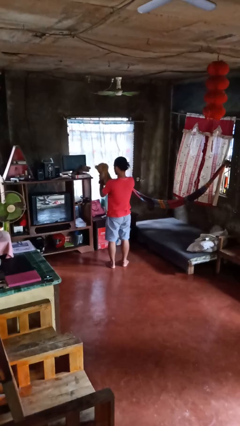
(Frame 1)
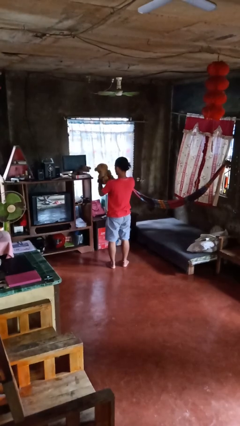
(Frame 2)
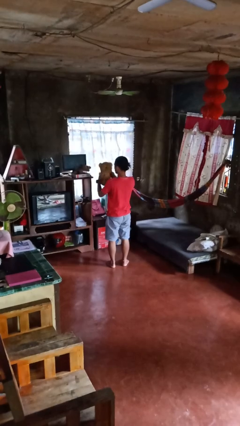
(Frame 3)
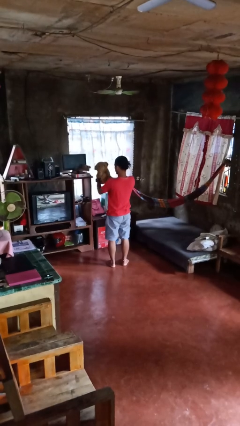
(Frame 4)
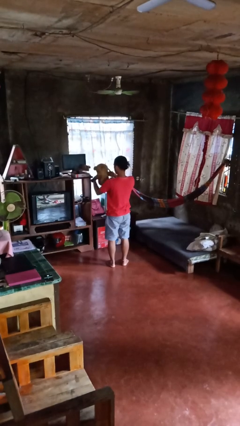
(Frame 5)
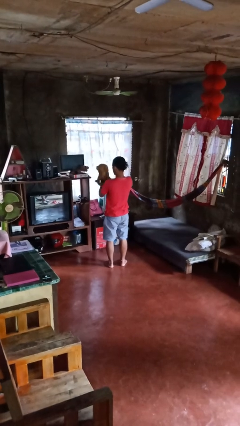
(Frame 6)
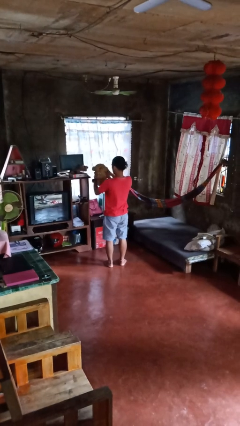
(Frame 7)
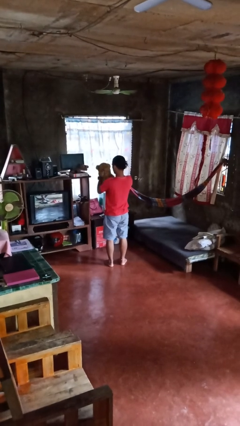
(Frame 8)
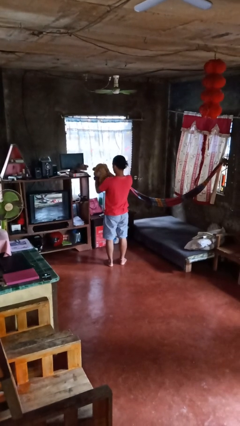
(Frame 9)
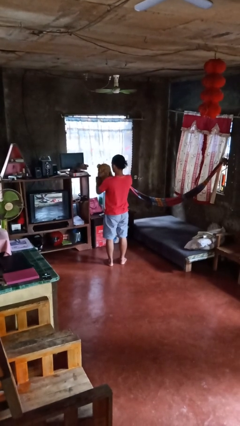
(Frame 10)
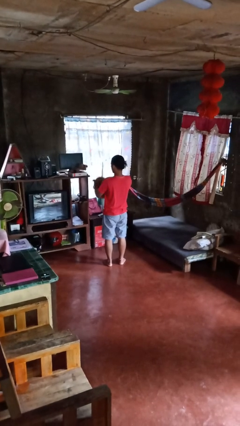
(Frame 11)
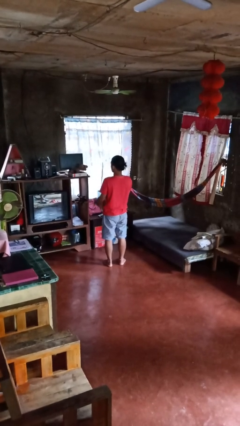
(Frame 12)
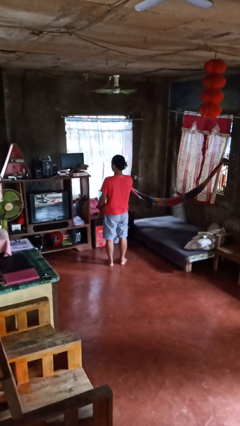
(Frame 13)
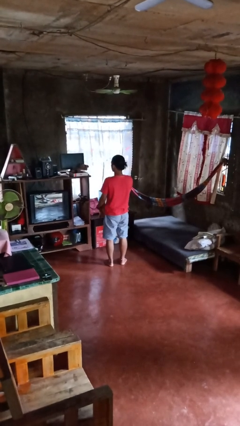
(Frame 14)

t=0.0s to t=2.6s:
person squeezes object

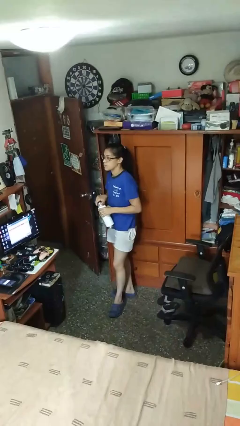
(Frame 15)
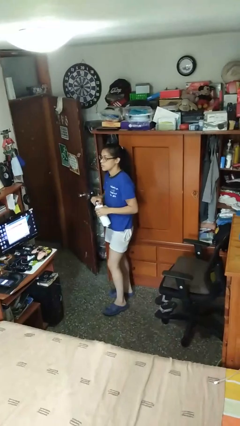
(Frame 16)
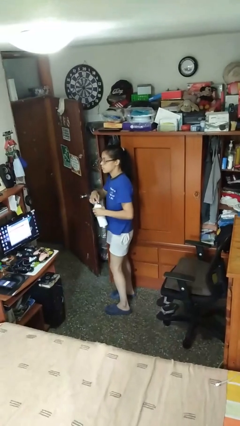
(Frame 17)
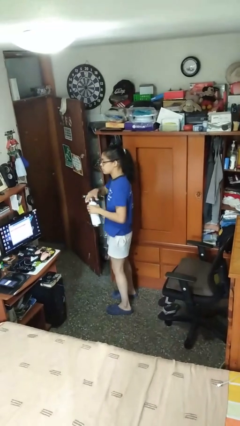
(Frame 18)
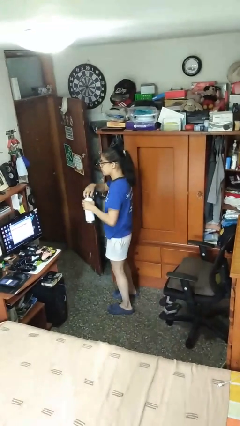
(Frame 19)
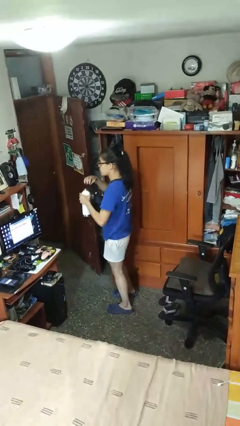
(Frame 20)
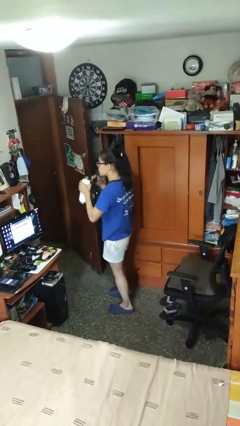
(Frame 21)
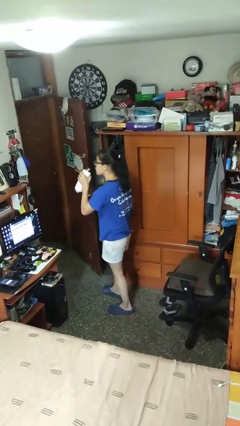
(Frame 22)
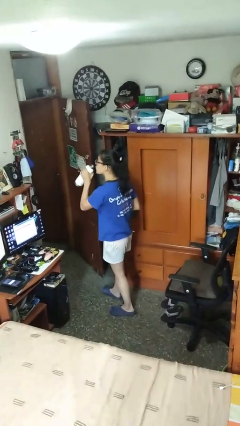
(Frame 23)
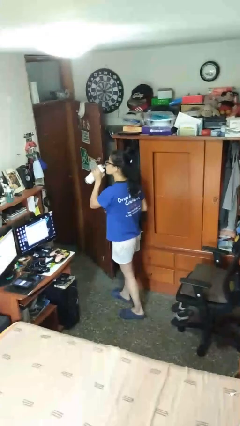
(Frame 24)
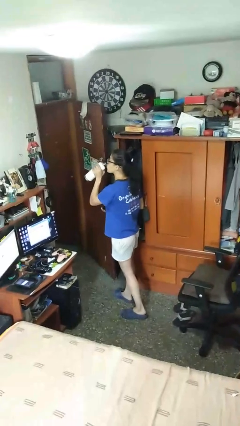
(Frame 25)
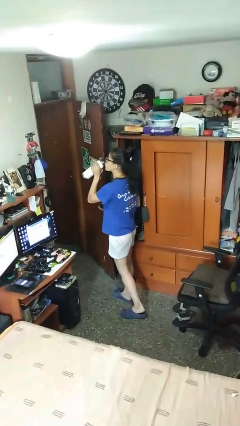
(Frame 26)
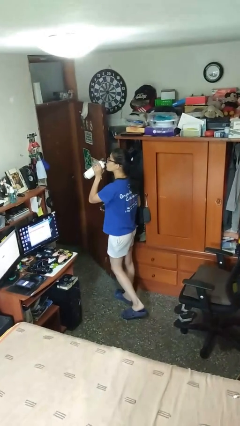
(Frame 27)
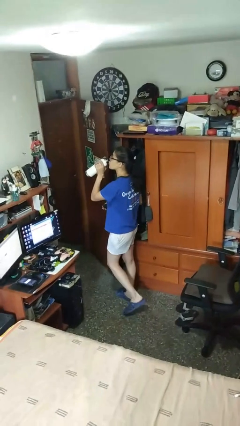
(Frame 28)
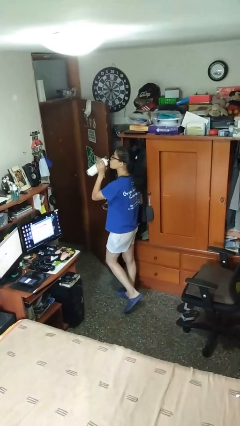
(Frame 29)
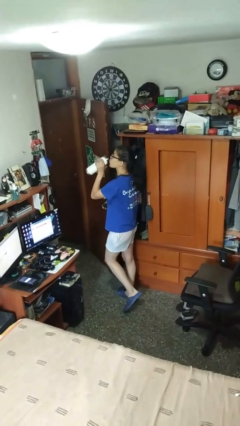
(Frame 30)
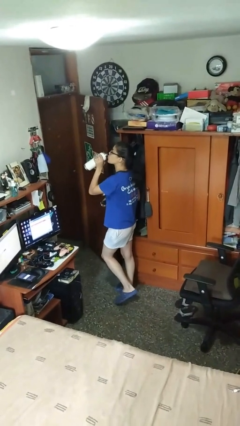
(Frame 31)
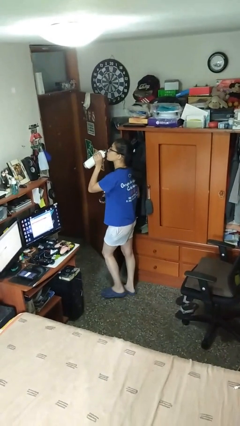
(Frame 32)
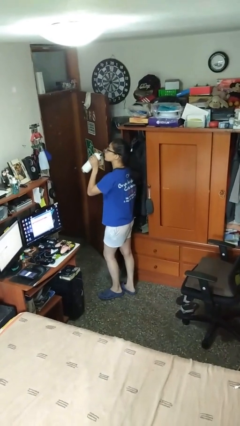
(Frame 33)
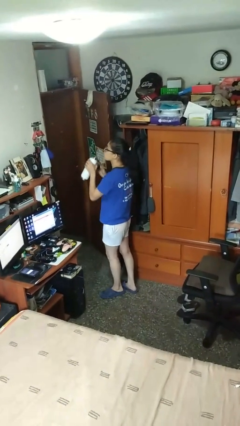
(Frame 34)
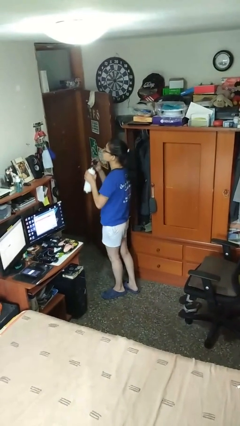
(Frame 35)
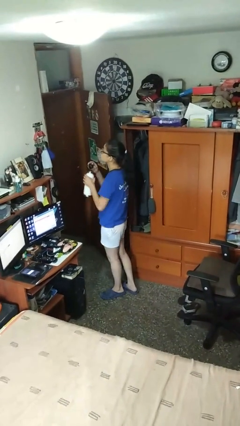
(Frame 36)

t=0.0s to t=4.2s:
person drinks from bottle

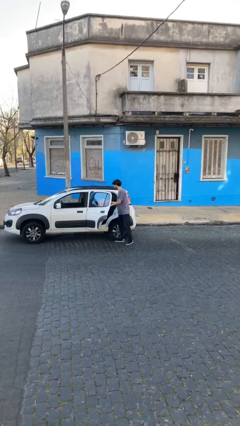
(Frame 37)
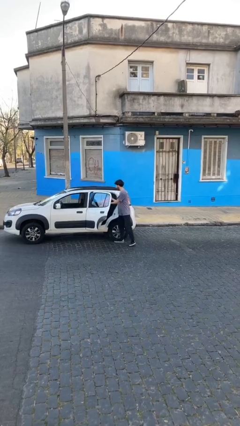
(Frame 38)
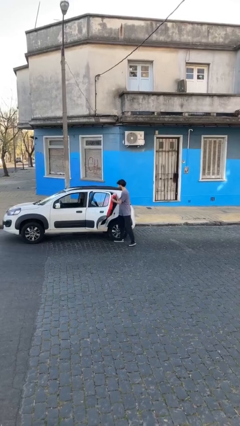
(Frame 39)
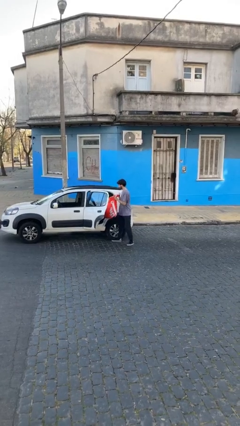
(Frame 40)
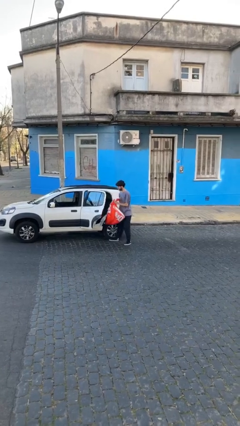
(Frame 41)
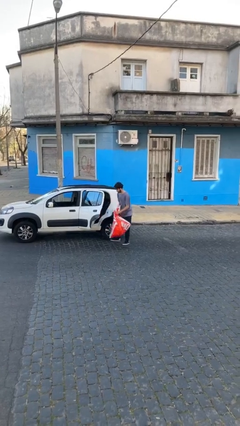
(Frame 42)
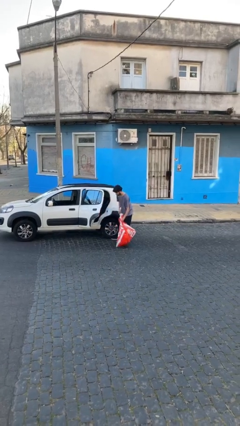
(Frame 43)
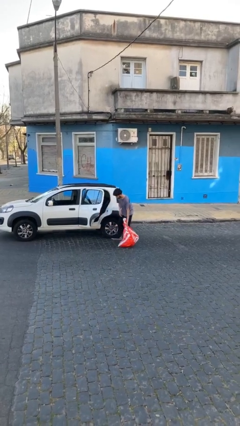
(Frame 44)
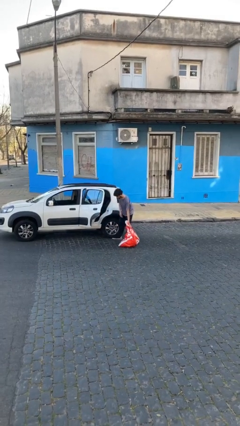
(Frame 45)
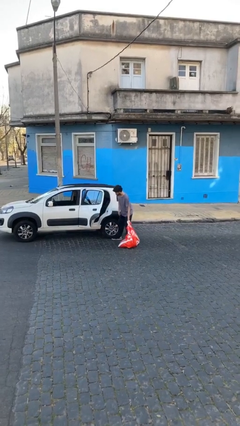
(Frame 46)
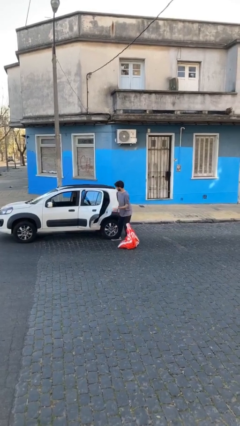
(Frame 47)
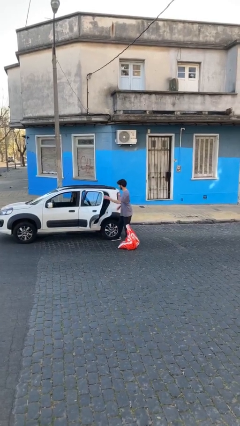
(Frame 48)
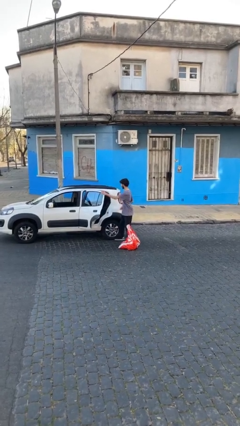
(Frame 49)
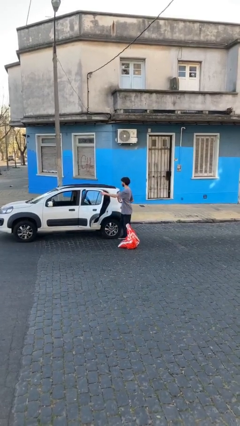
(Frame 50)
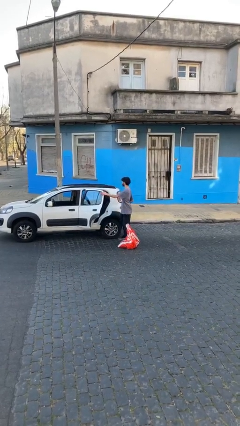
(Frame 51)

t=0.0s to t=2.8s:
person unloads car

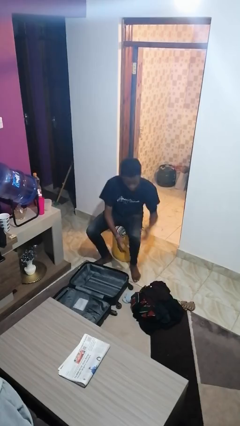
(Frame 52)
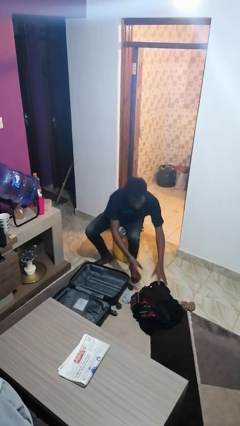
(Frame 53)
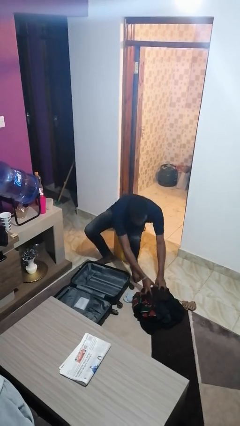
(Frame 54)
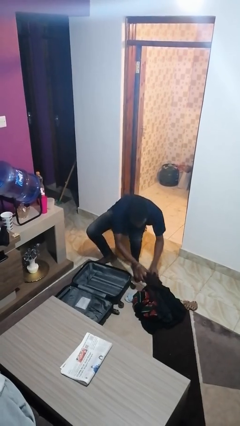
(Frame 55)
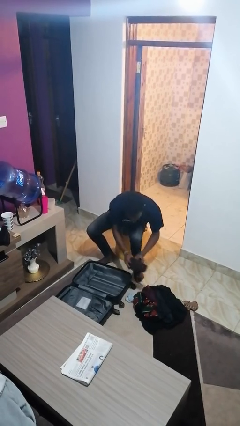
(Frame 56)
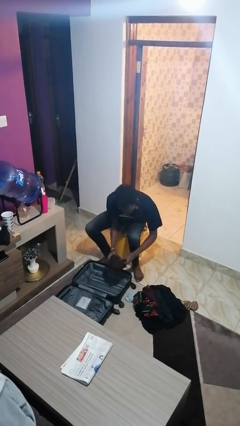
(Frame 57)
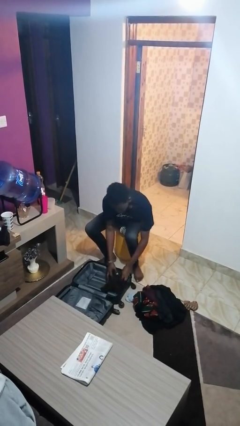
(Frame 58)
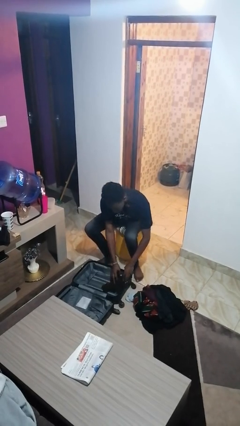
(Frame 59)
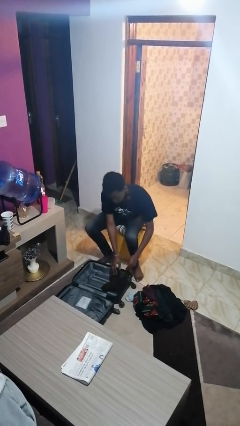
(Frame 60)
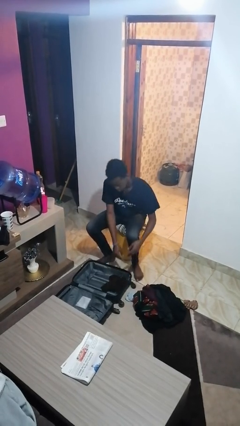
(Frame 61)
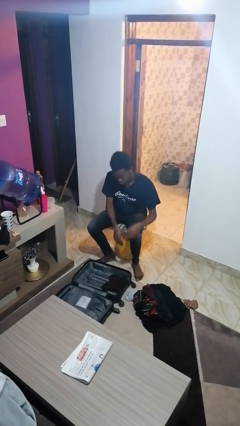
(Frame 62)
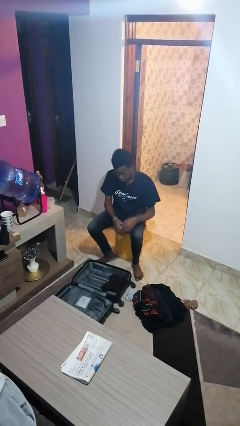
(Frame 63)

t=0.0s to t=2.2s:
person loads clothes into suitcase

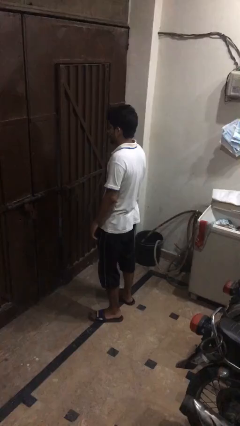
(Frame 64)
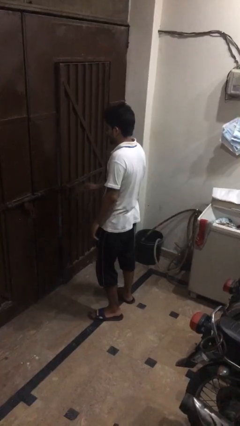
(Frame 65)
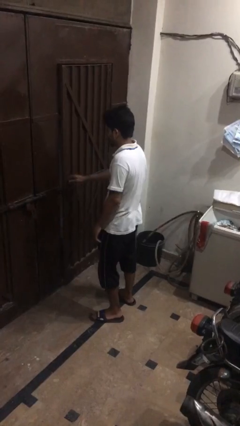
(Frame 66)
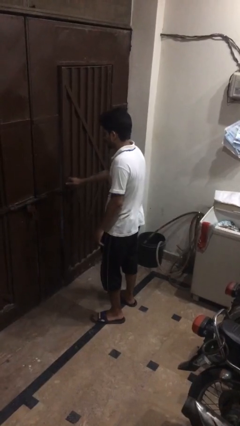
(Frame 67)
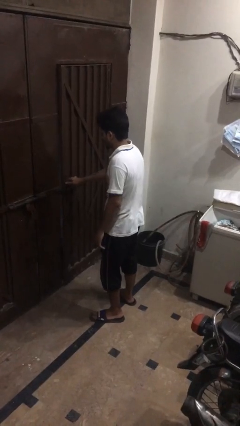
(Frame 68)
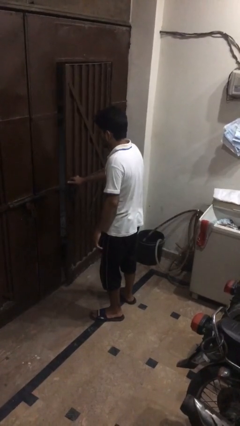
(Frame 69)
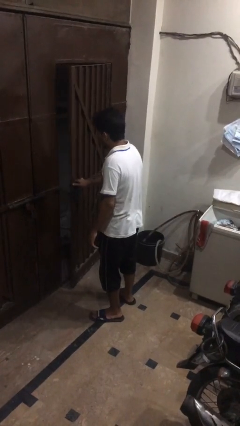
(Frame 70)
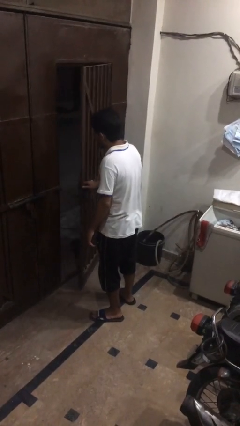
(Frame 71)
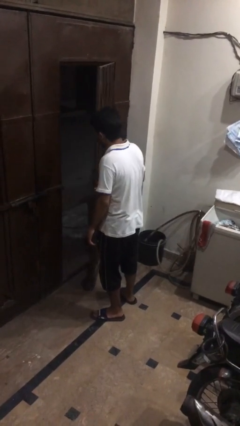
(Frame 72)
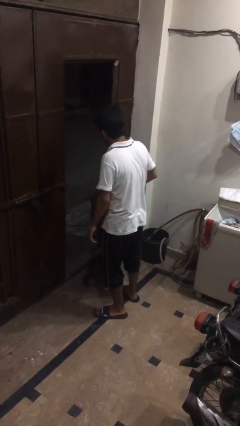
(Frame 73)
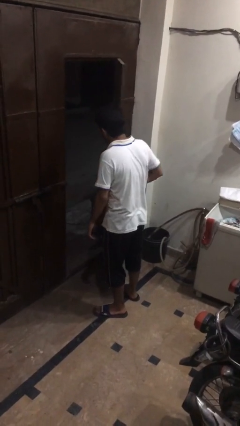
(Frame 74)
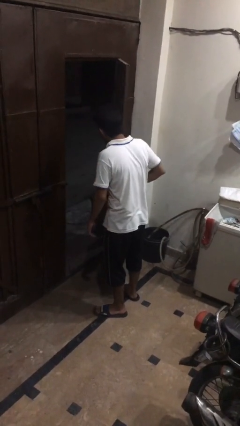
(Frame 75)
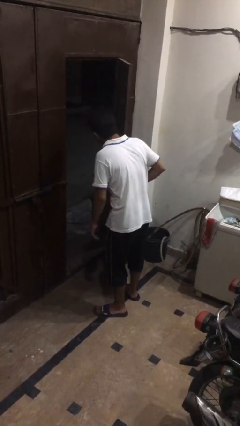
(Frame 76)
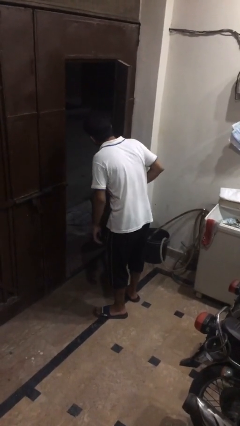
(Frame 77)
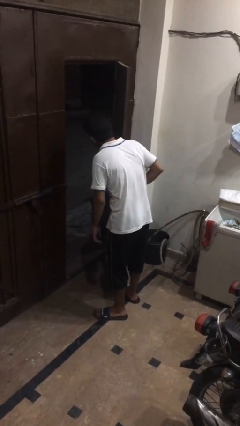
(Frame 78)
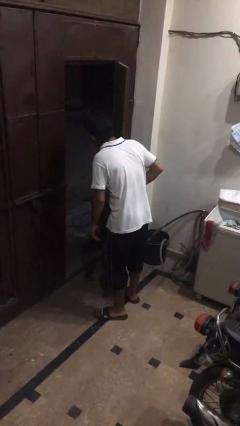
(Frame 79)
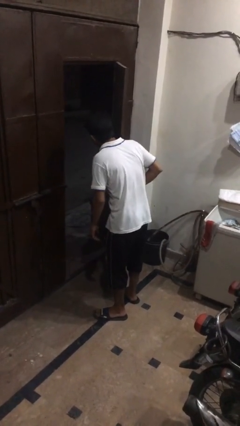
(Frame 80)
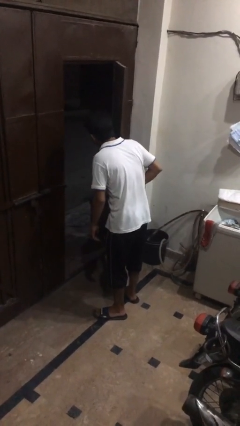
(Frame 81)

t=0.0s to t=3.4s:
person opens gate

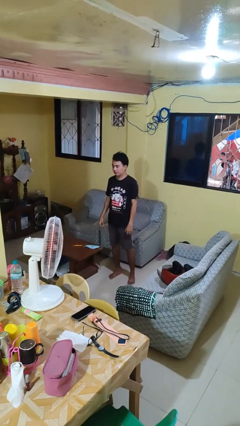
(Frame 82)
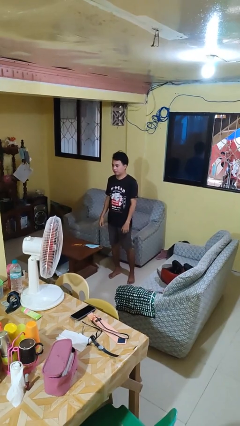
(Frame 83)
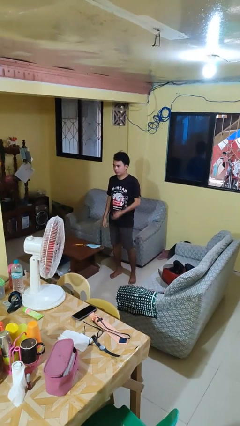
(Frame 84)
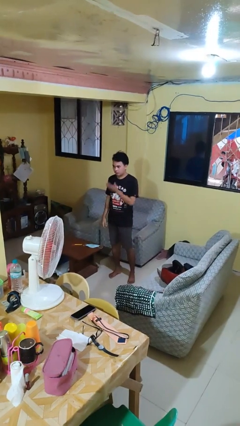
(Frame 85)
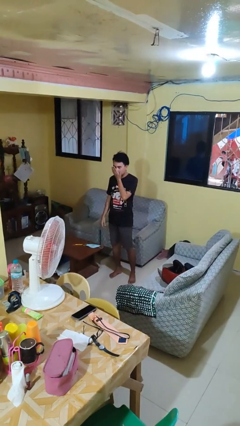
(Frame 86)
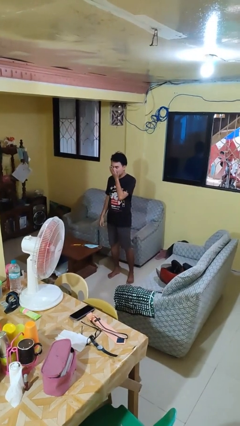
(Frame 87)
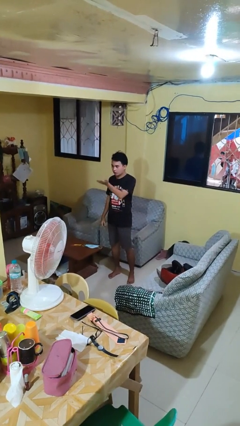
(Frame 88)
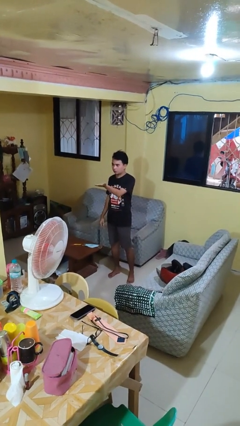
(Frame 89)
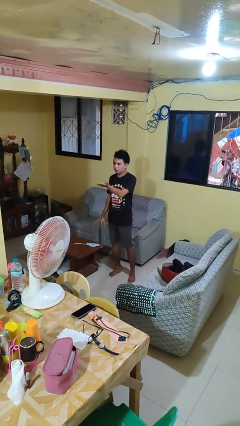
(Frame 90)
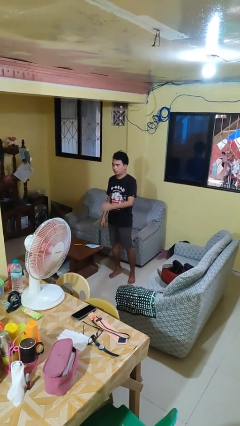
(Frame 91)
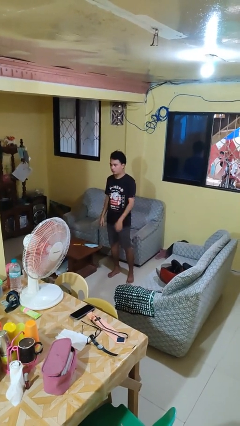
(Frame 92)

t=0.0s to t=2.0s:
person gestures blow kiss
